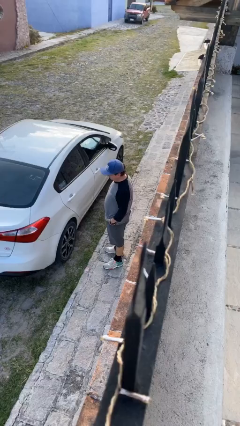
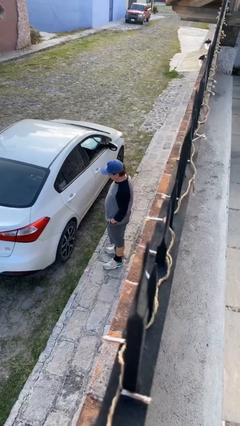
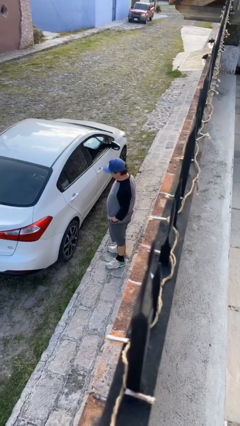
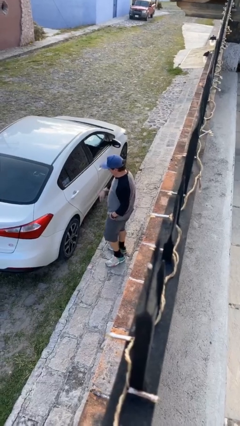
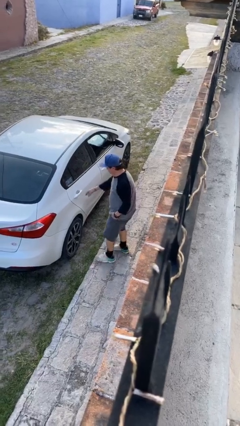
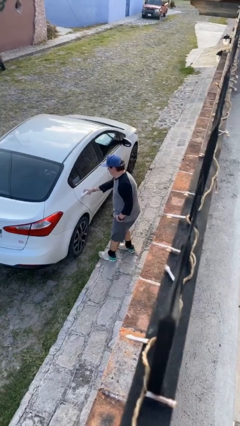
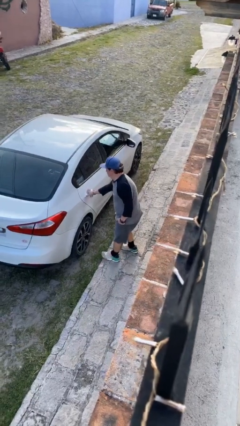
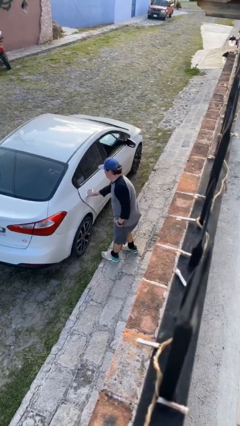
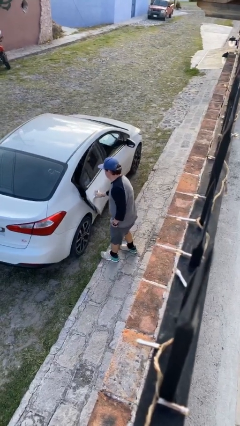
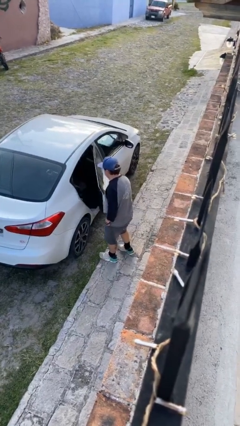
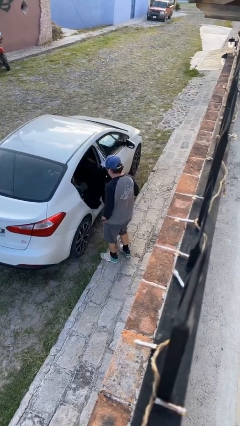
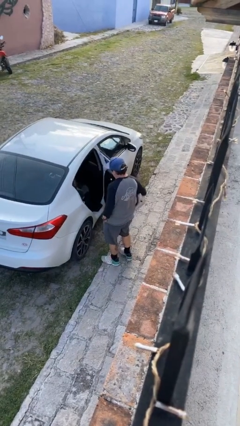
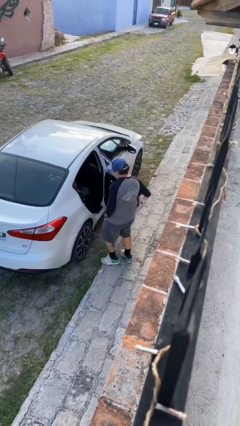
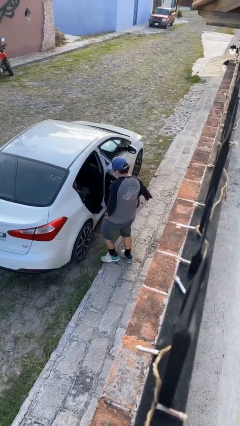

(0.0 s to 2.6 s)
person opens car door

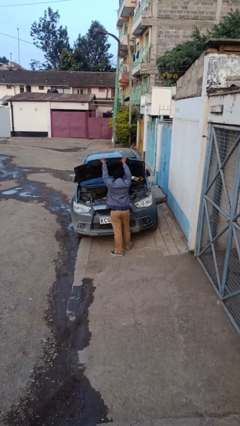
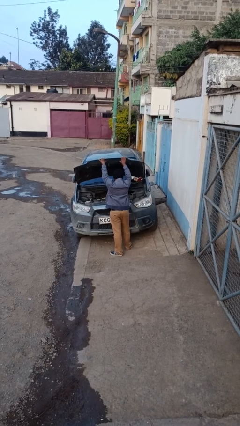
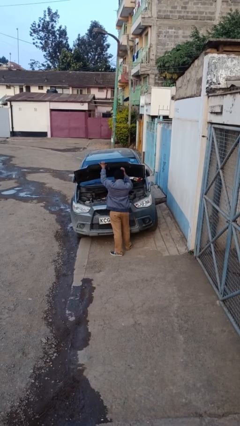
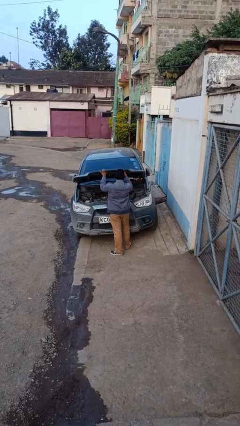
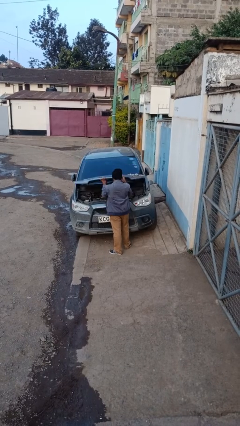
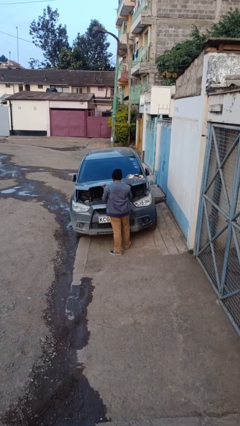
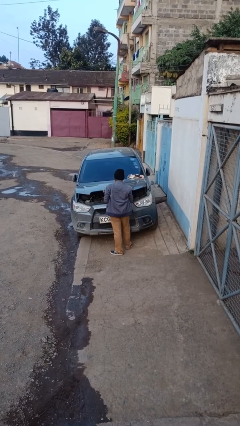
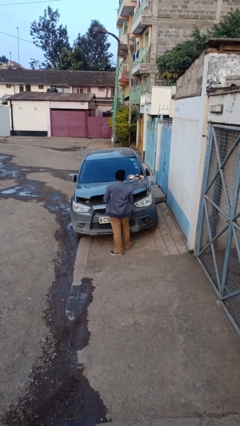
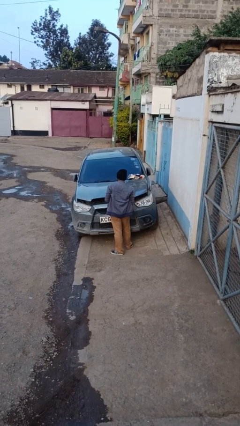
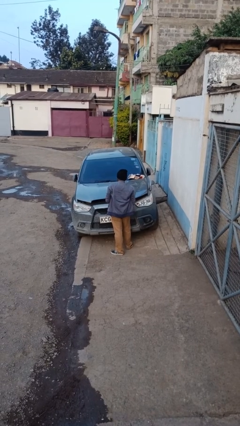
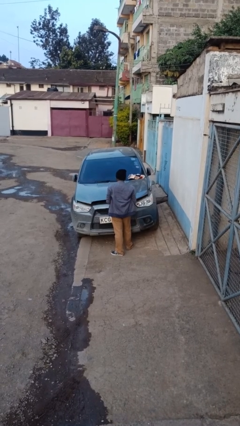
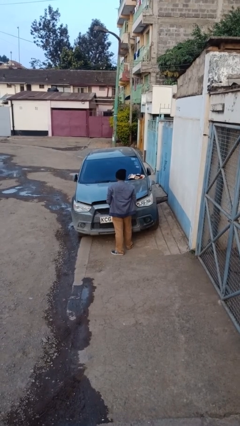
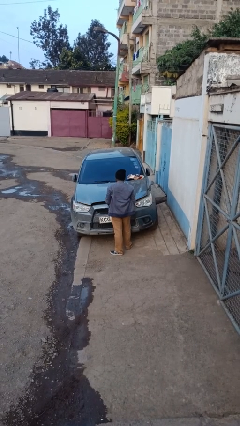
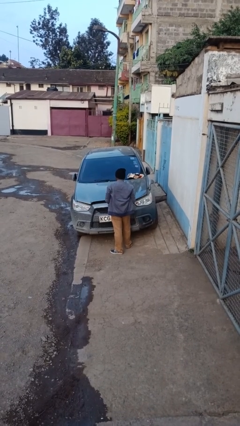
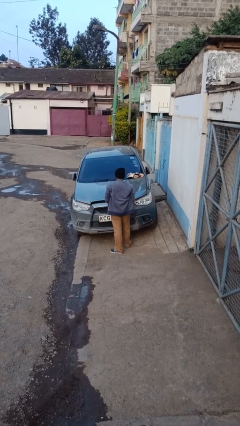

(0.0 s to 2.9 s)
person closes car hood

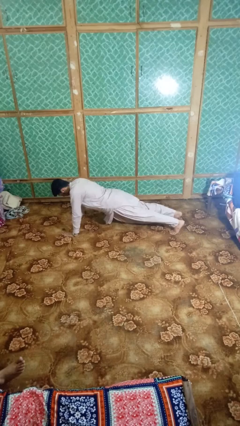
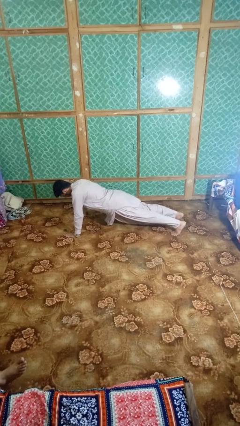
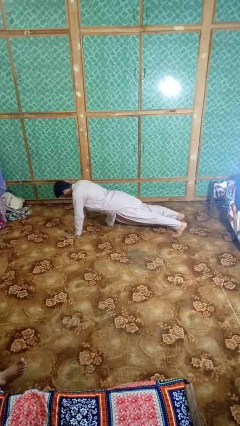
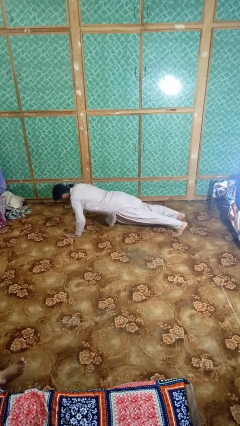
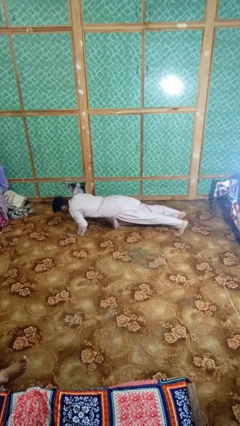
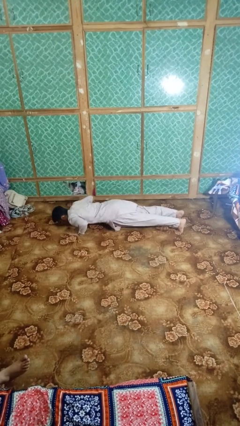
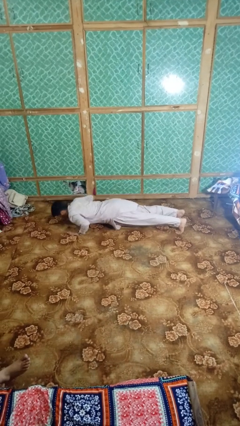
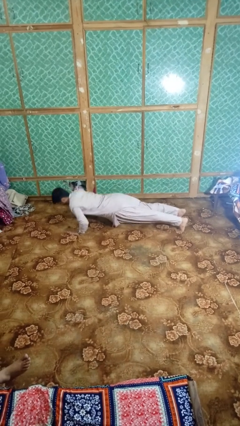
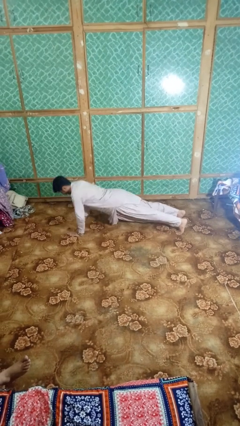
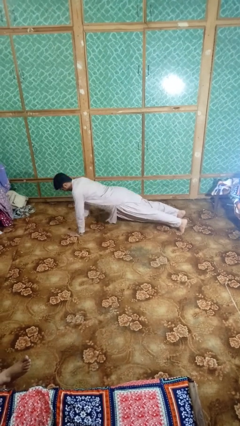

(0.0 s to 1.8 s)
person exercises with pushup

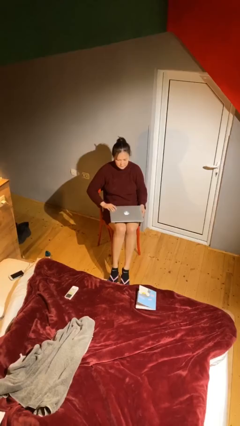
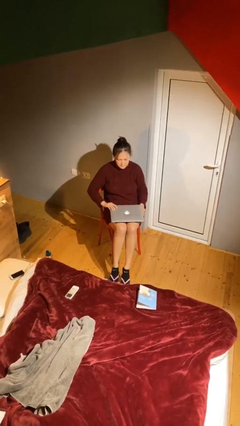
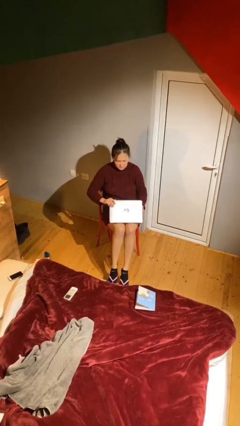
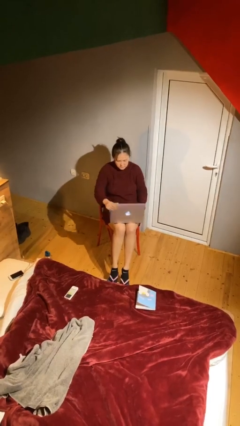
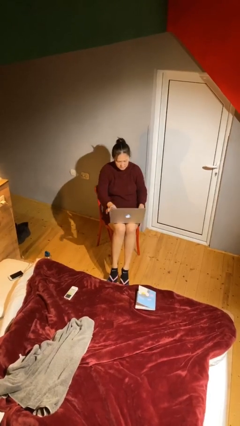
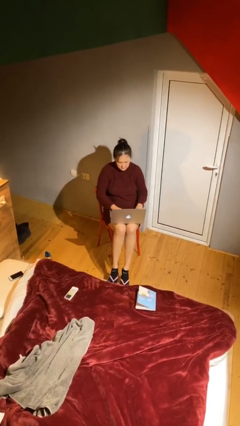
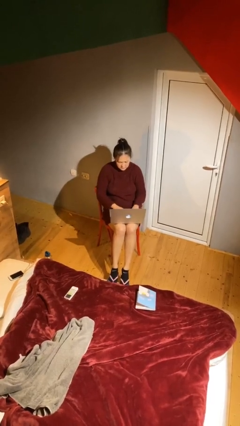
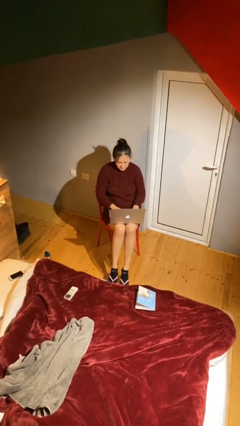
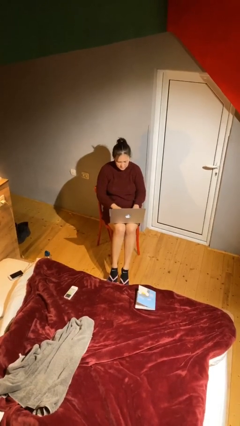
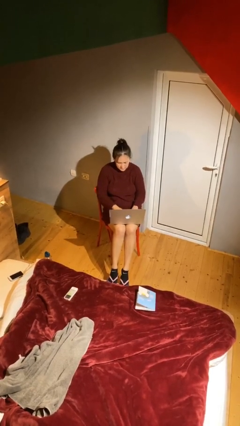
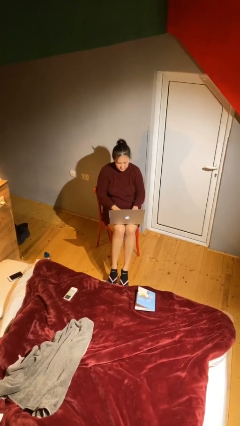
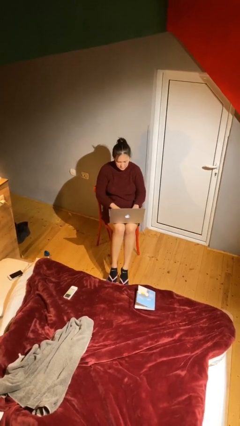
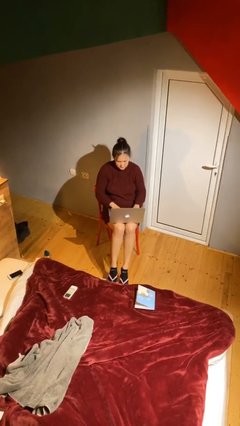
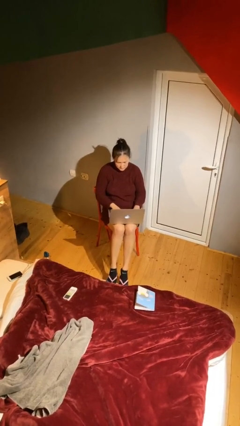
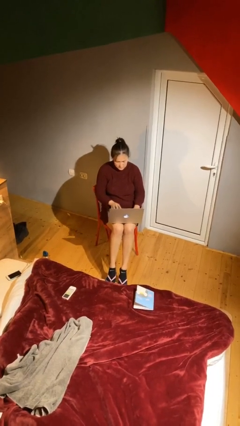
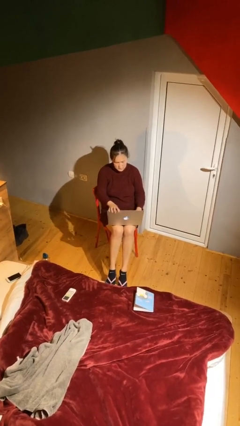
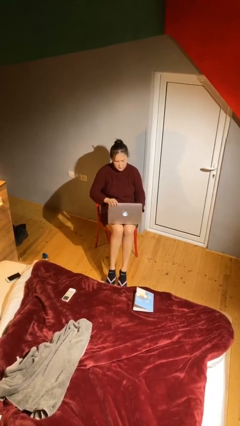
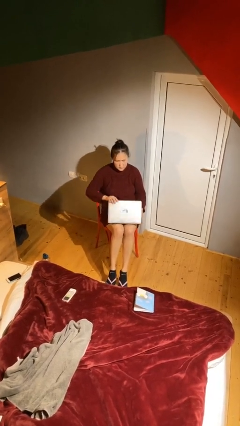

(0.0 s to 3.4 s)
person interacts with laptop

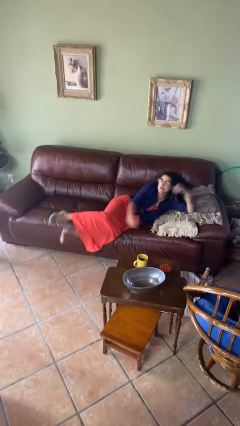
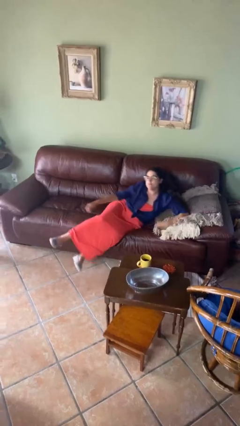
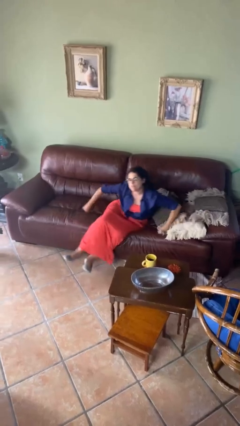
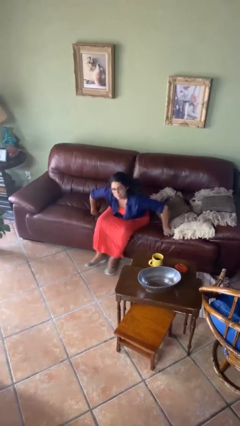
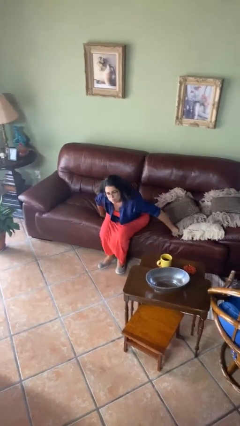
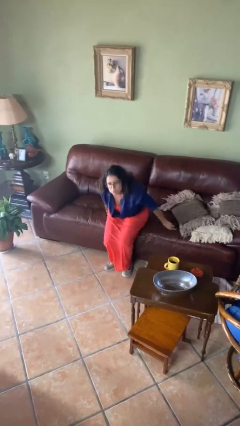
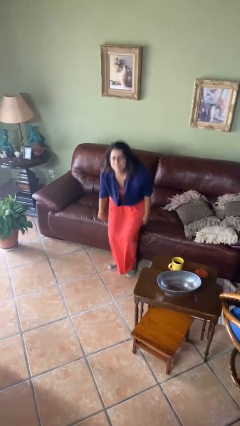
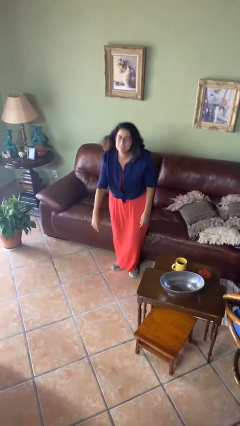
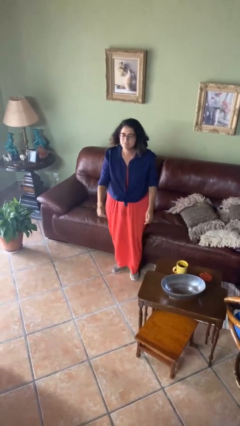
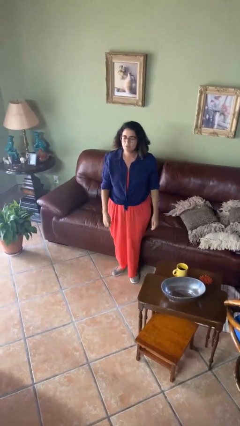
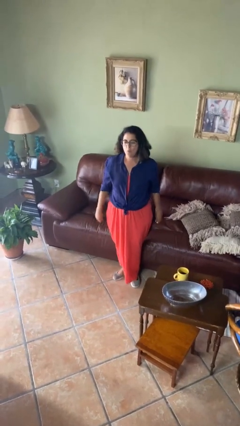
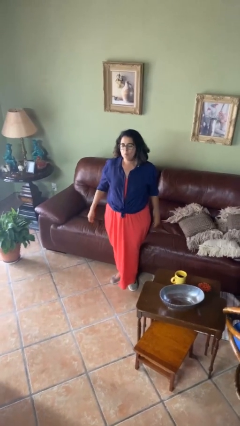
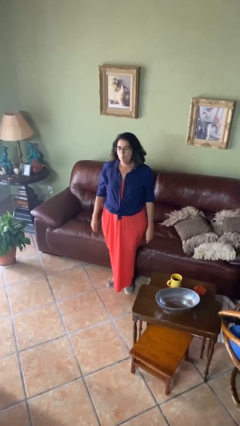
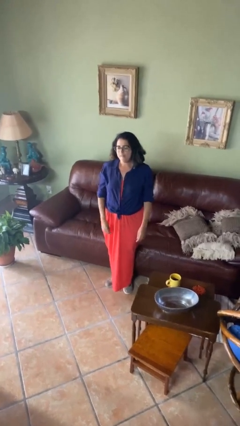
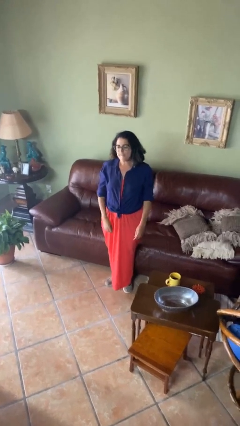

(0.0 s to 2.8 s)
person stands up

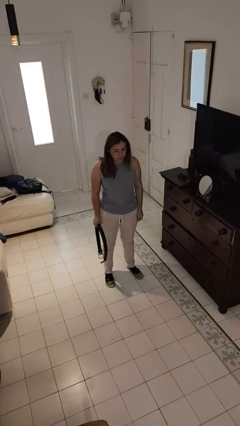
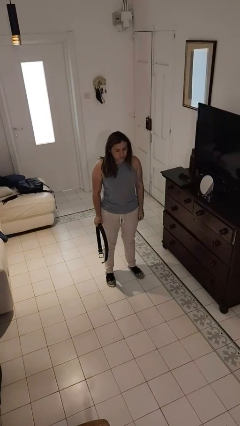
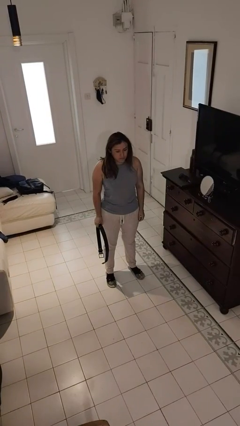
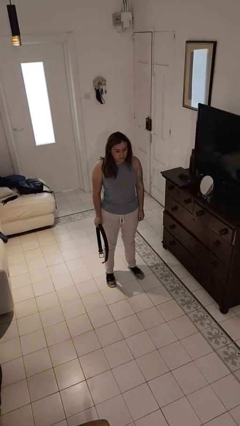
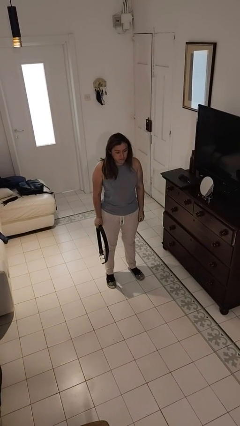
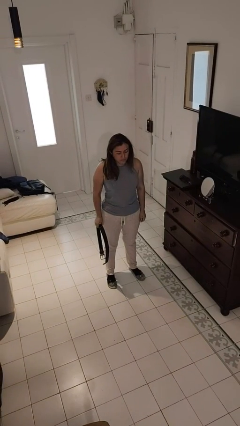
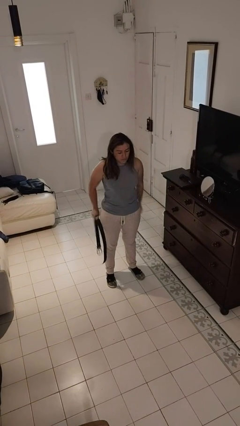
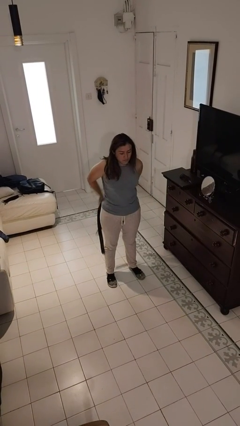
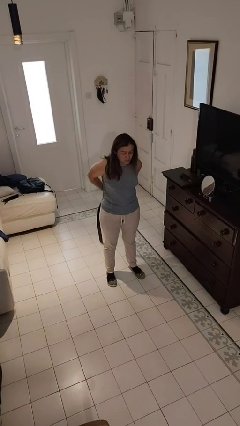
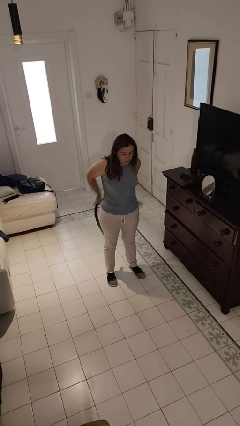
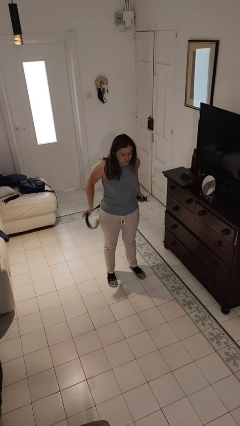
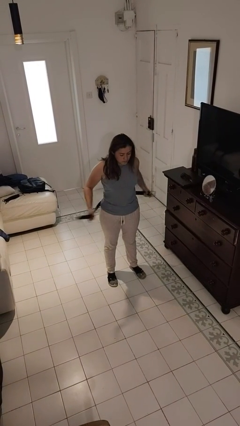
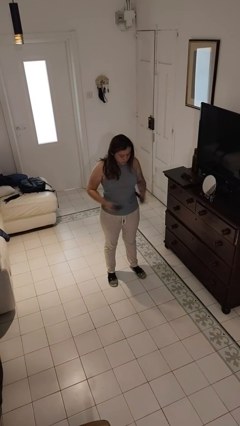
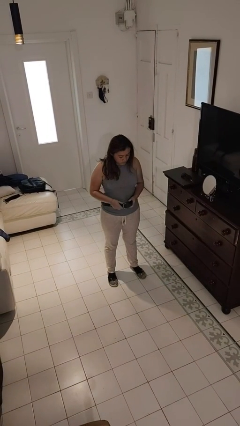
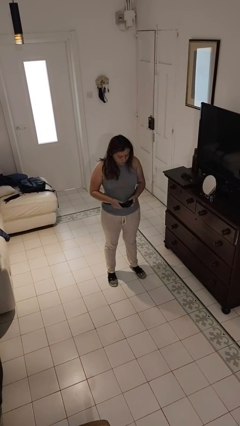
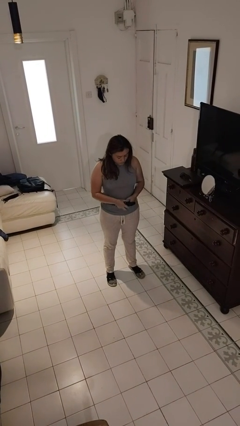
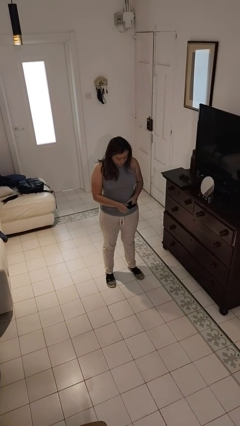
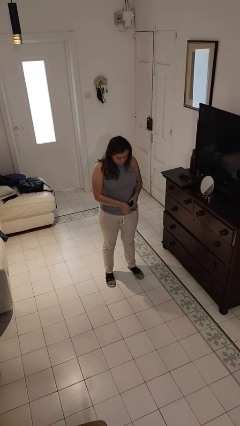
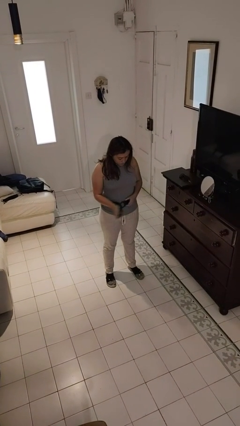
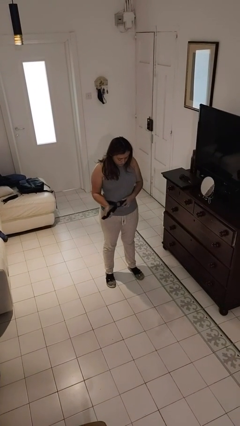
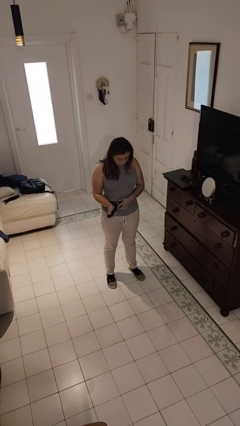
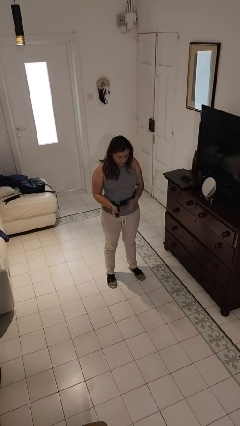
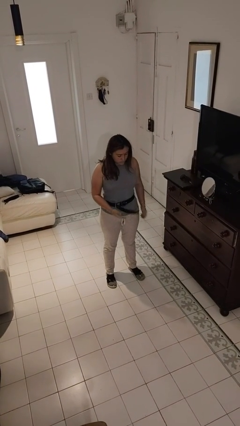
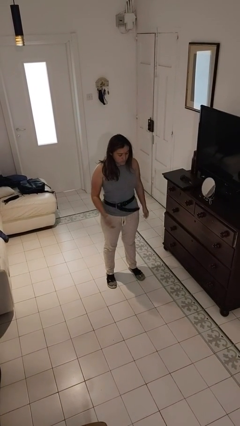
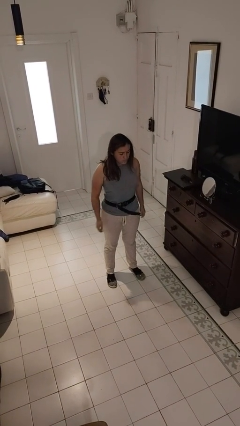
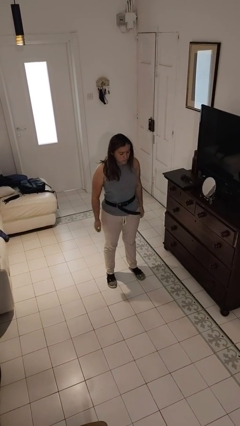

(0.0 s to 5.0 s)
person puts on belt
